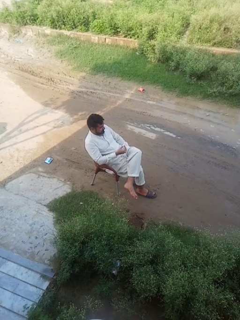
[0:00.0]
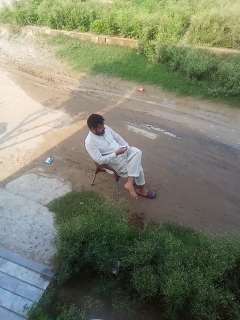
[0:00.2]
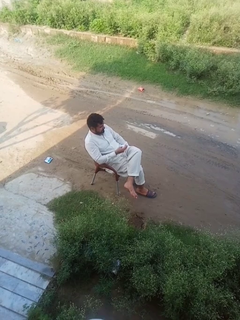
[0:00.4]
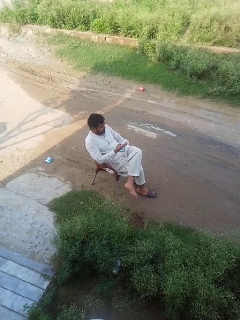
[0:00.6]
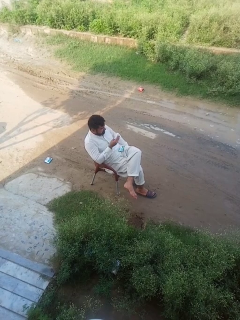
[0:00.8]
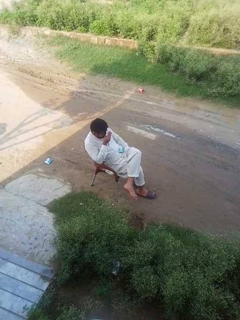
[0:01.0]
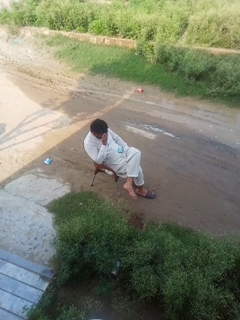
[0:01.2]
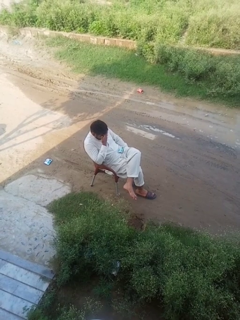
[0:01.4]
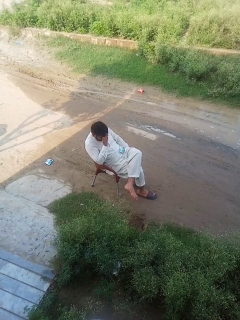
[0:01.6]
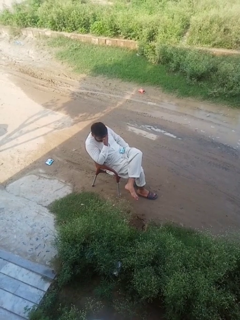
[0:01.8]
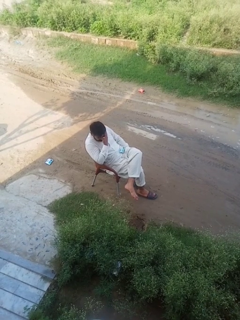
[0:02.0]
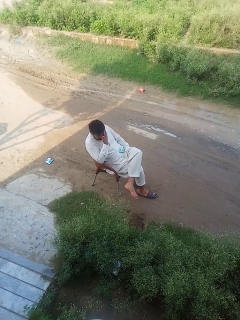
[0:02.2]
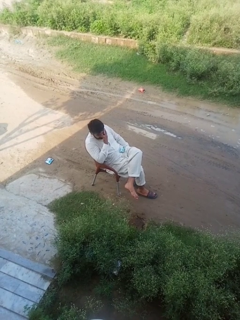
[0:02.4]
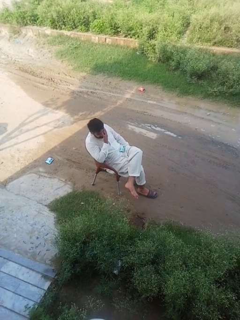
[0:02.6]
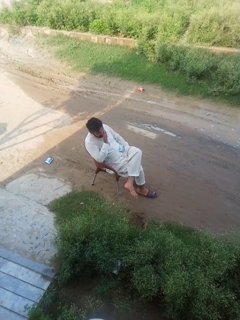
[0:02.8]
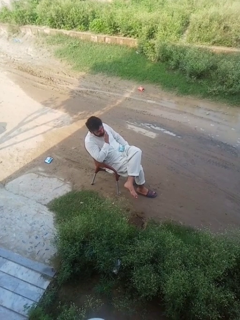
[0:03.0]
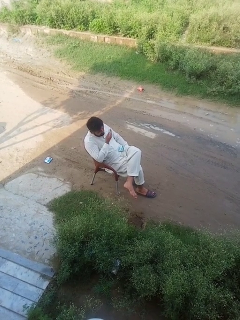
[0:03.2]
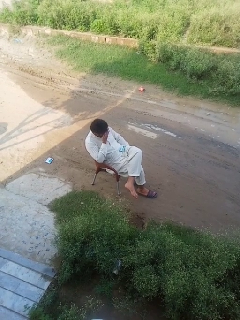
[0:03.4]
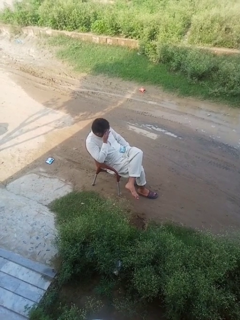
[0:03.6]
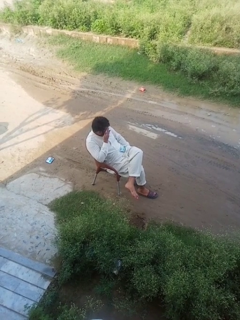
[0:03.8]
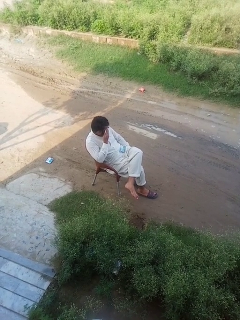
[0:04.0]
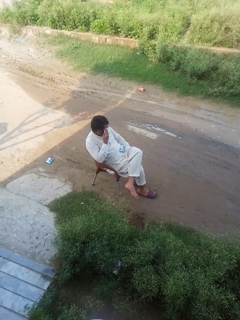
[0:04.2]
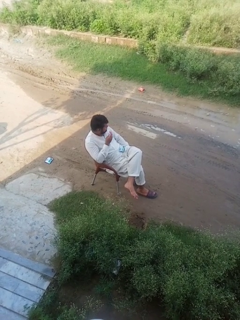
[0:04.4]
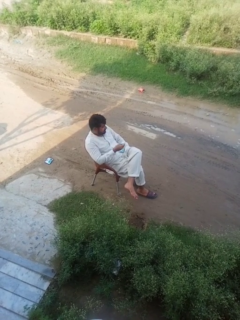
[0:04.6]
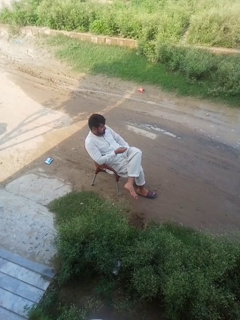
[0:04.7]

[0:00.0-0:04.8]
person wipes mouth with napkin

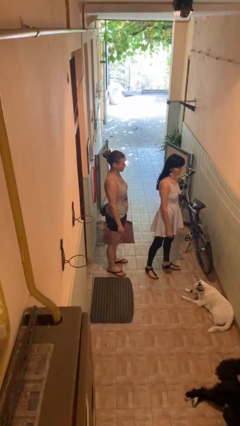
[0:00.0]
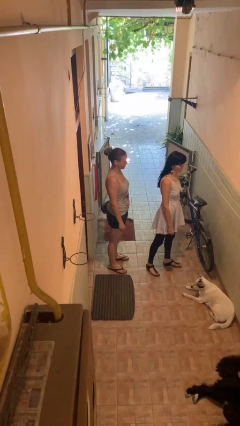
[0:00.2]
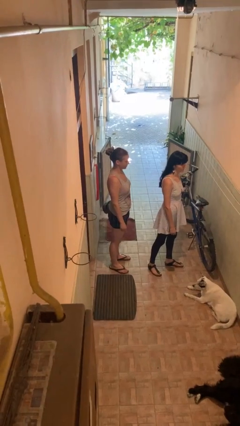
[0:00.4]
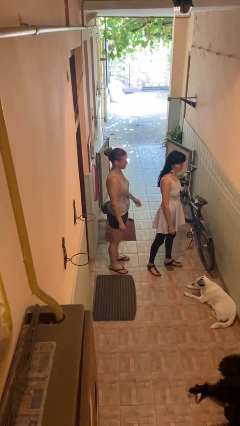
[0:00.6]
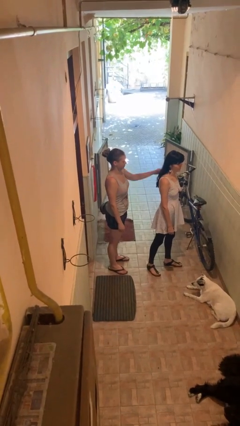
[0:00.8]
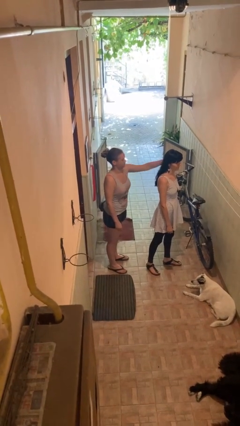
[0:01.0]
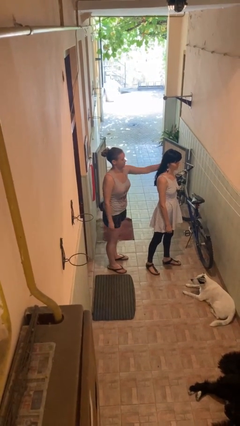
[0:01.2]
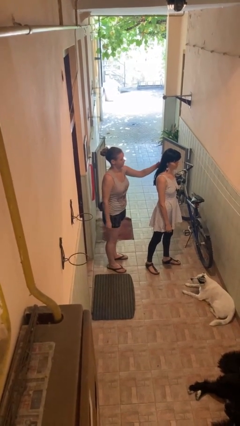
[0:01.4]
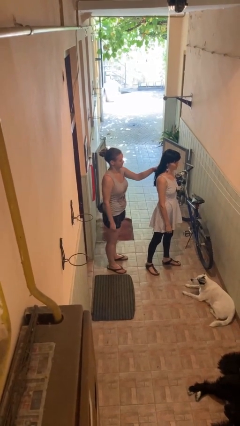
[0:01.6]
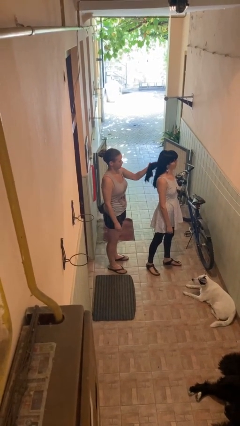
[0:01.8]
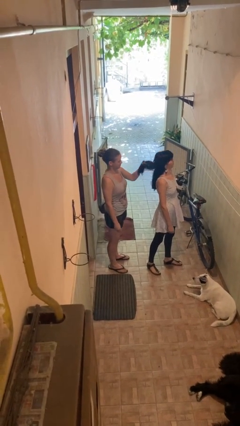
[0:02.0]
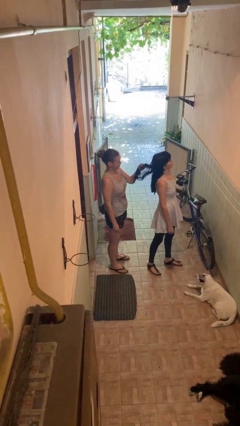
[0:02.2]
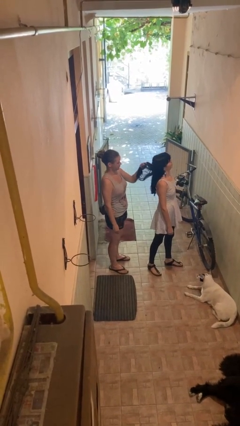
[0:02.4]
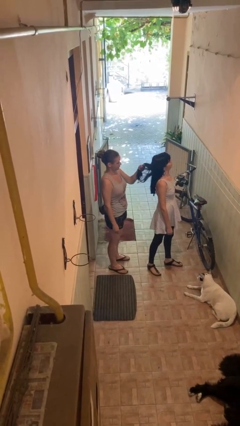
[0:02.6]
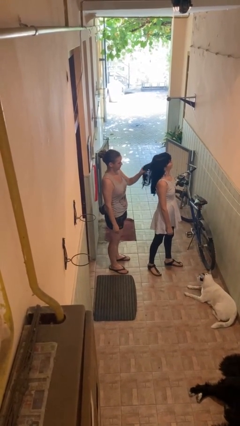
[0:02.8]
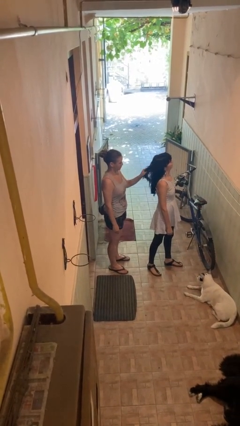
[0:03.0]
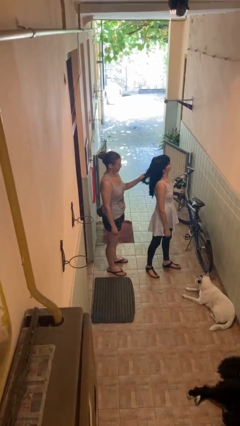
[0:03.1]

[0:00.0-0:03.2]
person grabs person by hair

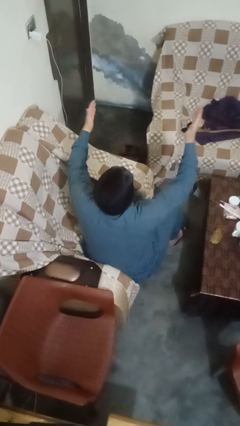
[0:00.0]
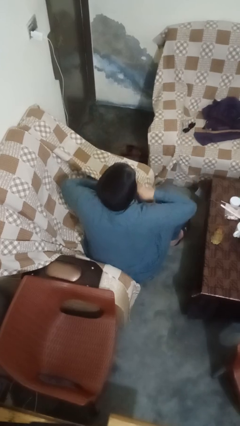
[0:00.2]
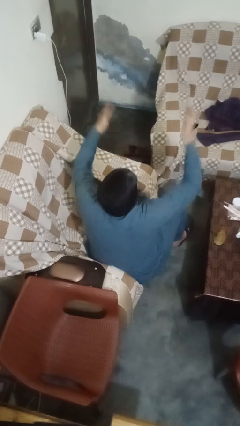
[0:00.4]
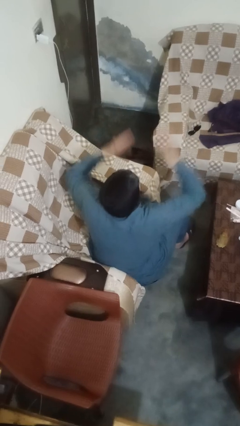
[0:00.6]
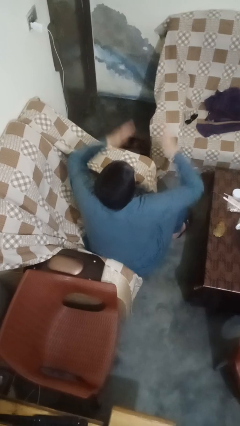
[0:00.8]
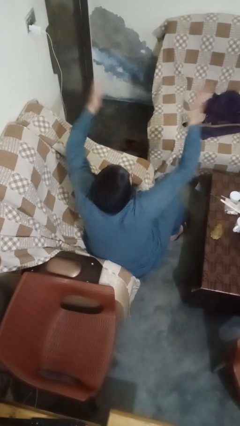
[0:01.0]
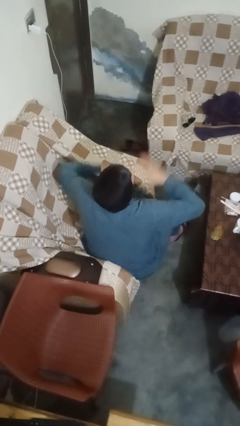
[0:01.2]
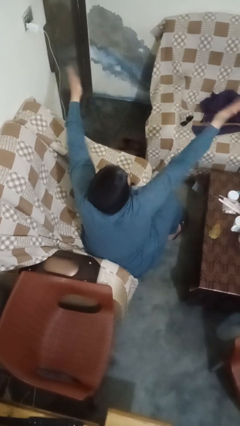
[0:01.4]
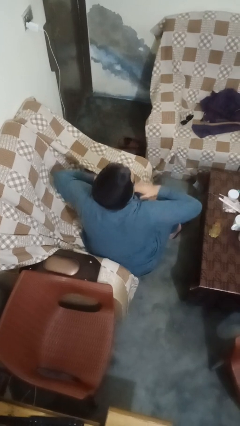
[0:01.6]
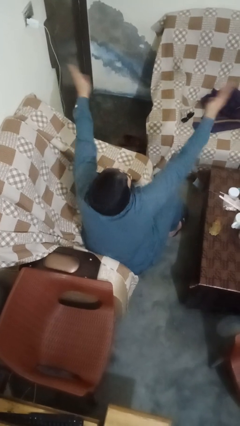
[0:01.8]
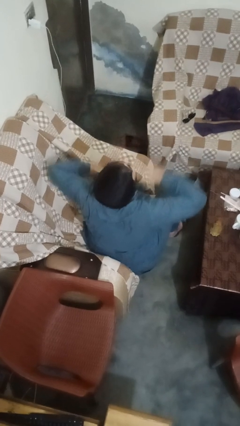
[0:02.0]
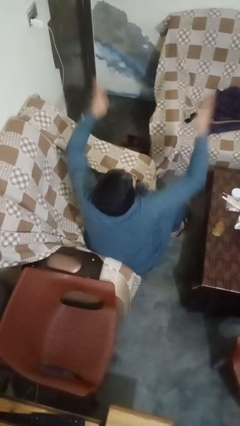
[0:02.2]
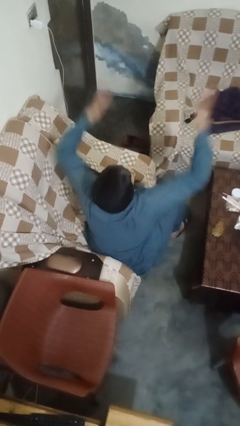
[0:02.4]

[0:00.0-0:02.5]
person drums on chest

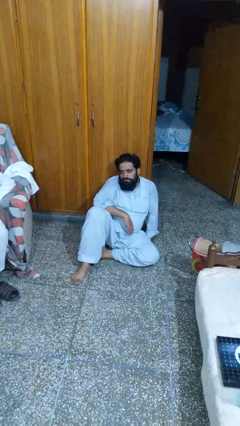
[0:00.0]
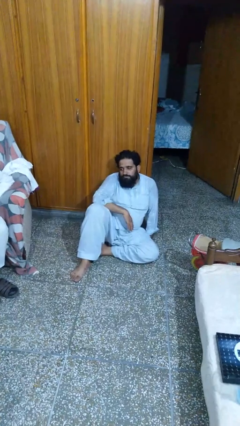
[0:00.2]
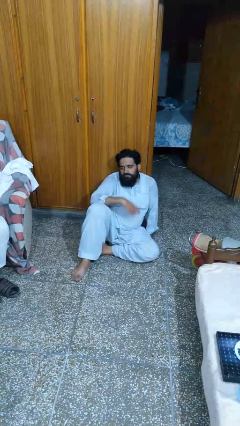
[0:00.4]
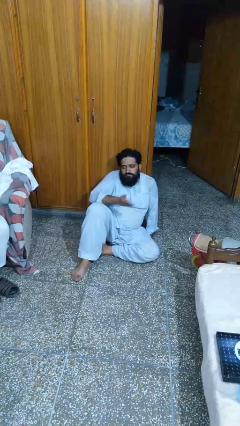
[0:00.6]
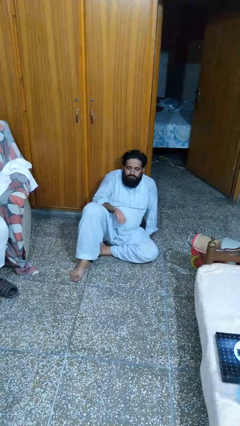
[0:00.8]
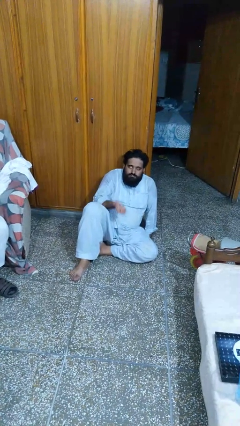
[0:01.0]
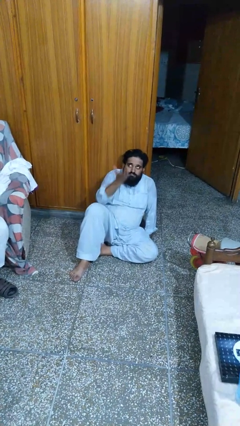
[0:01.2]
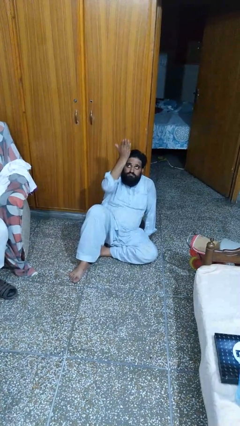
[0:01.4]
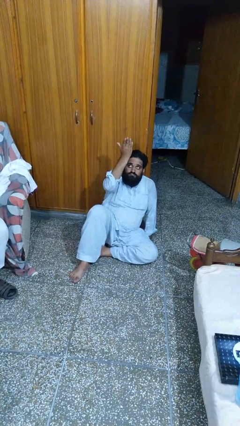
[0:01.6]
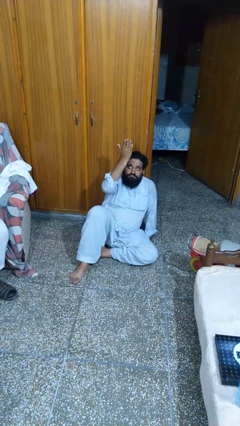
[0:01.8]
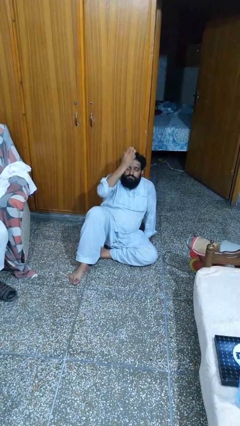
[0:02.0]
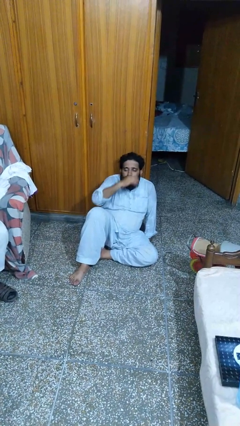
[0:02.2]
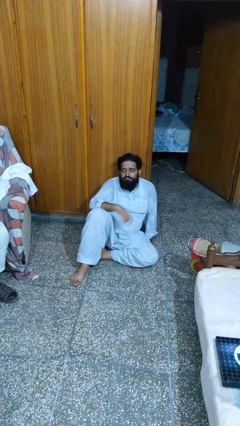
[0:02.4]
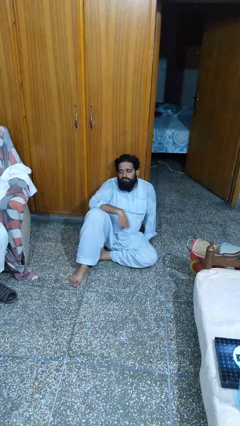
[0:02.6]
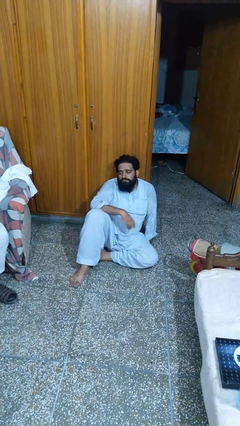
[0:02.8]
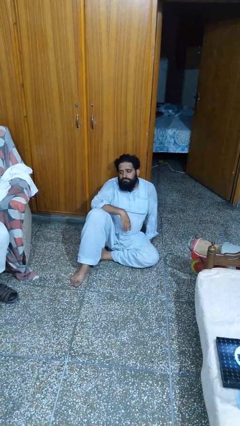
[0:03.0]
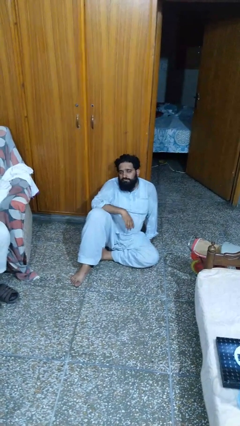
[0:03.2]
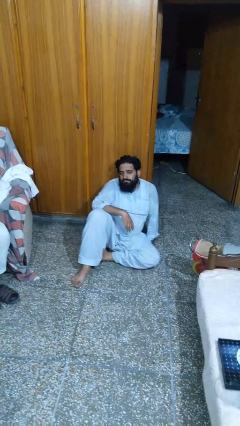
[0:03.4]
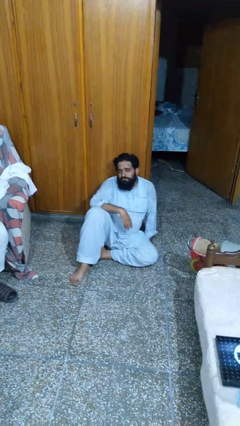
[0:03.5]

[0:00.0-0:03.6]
person gestures swipe up

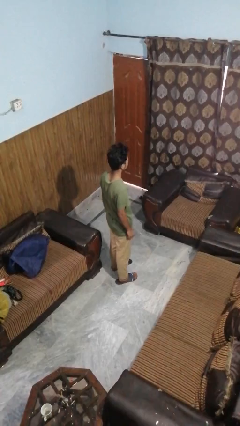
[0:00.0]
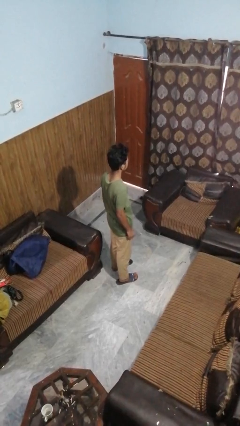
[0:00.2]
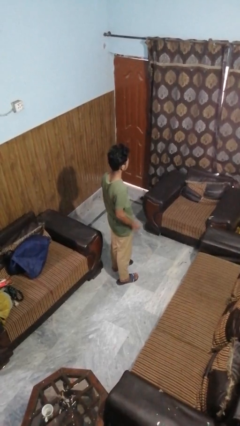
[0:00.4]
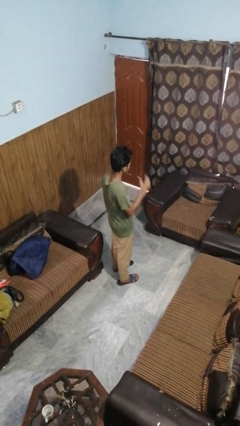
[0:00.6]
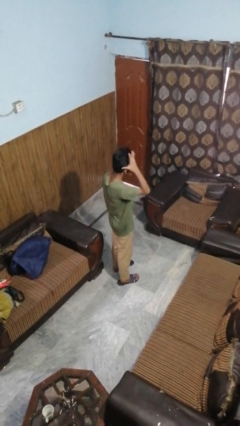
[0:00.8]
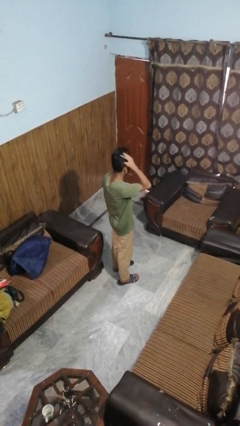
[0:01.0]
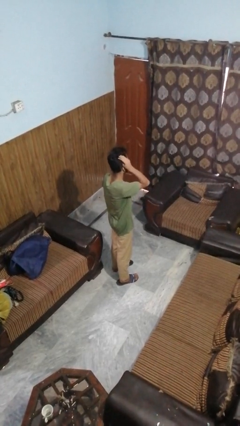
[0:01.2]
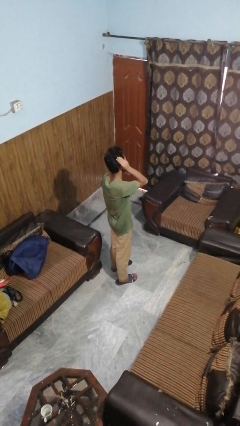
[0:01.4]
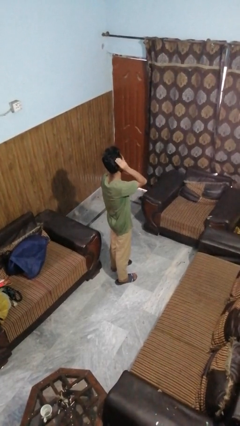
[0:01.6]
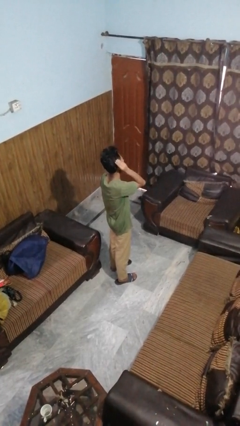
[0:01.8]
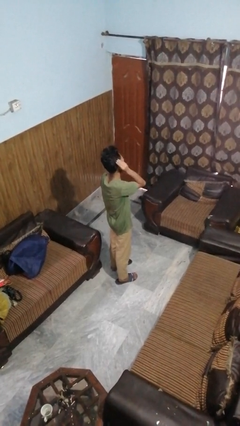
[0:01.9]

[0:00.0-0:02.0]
person strokes hair

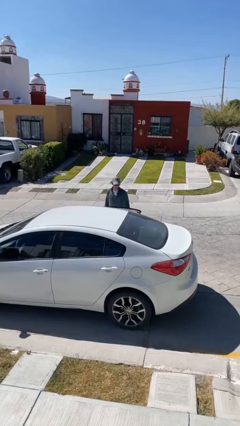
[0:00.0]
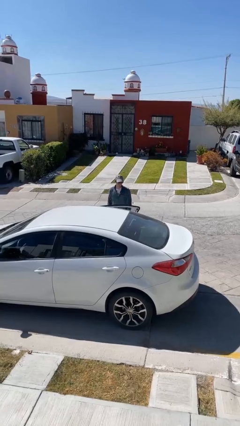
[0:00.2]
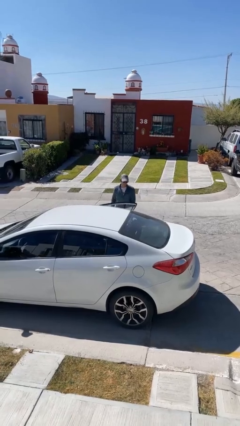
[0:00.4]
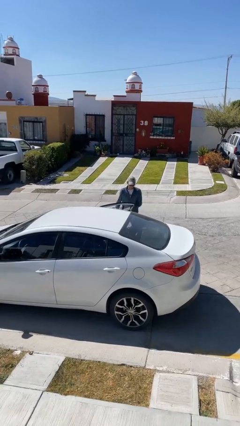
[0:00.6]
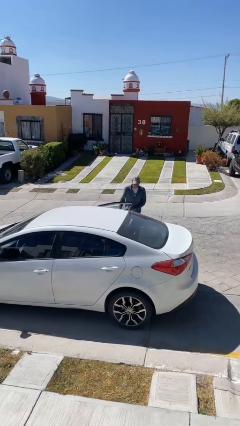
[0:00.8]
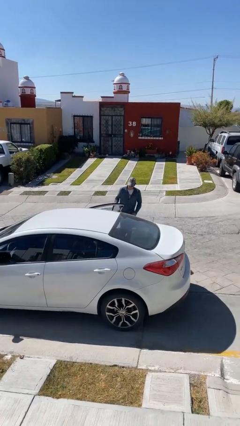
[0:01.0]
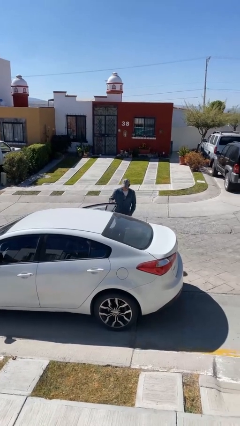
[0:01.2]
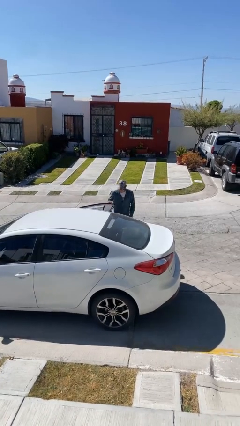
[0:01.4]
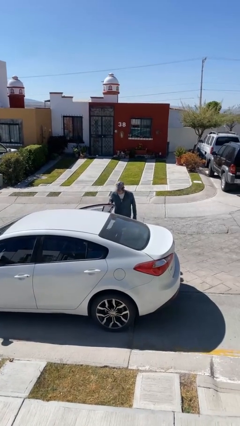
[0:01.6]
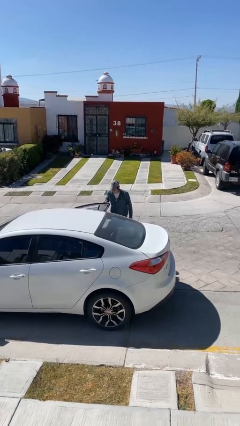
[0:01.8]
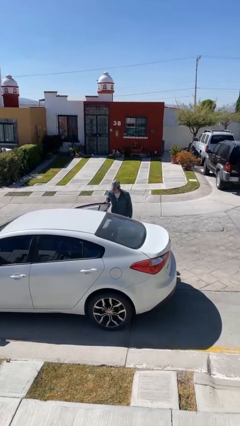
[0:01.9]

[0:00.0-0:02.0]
person opens car door

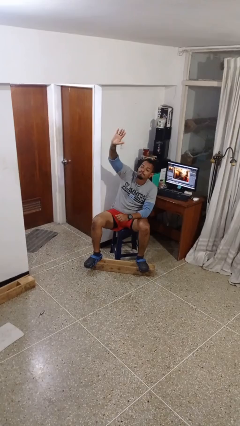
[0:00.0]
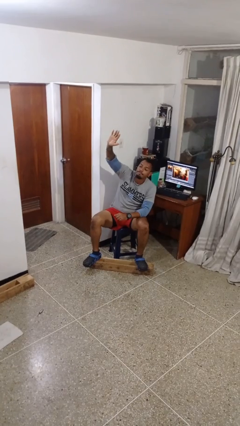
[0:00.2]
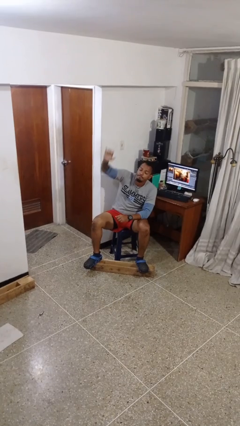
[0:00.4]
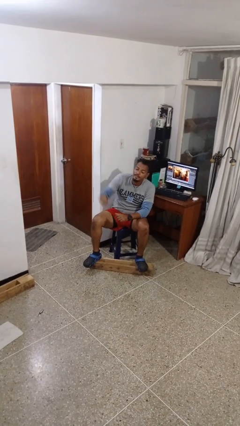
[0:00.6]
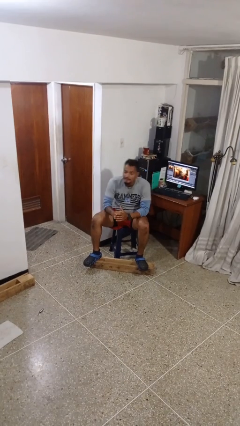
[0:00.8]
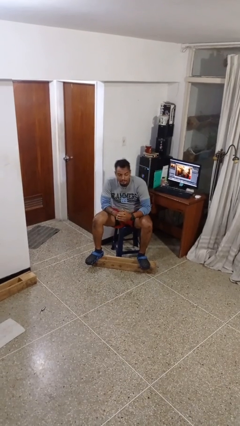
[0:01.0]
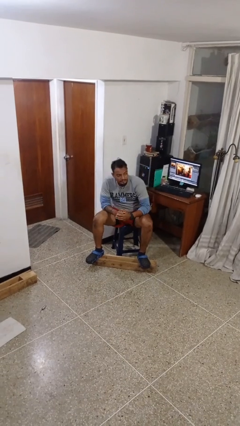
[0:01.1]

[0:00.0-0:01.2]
person gestures lower hand
